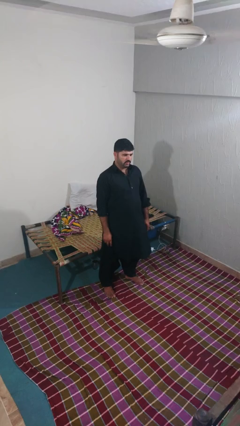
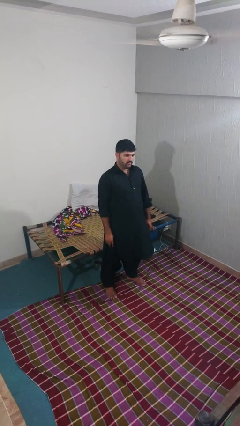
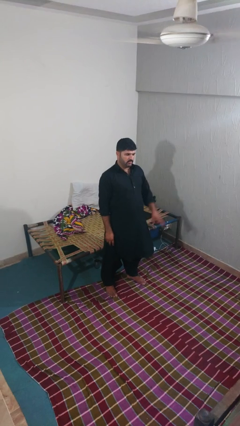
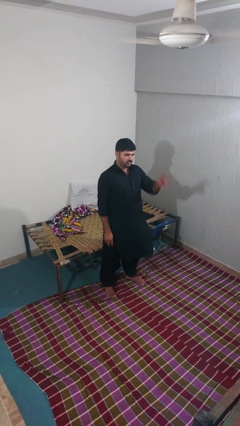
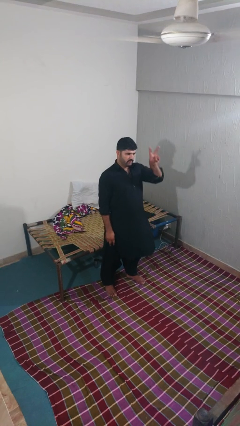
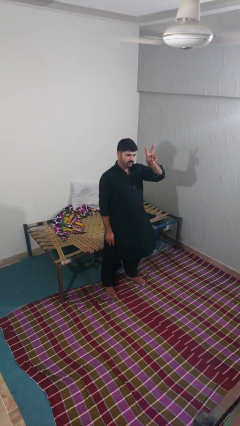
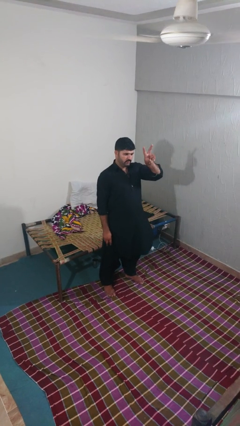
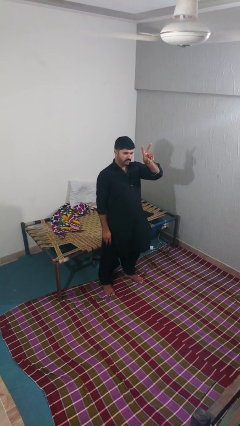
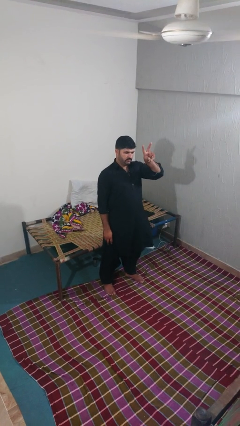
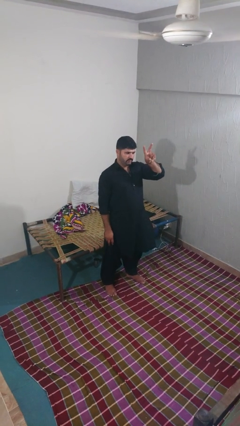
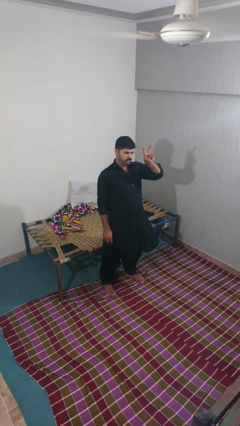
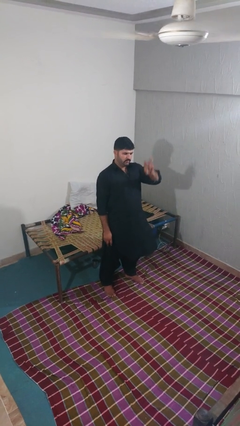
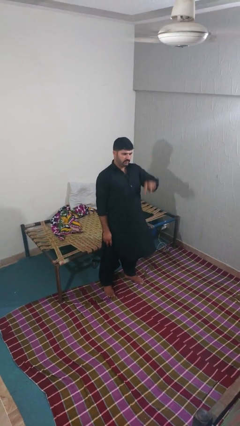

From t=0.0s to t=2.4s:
person gestures peace

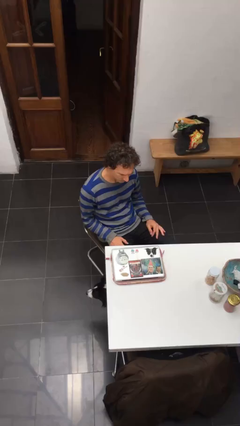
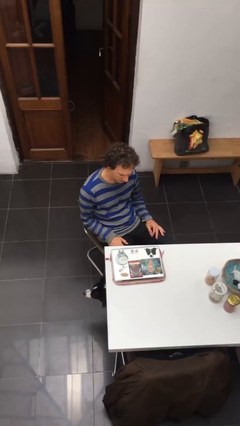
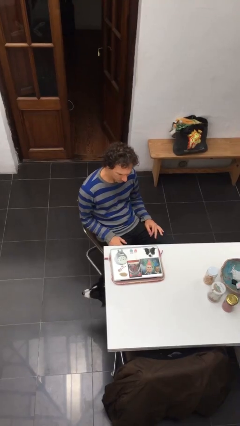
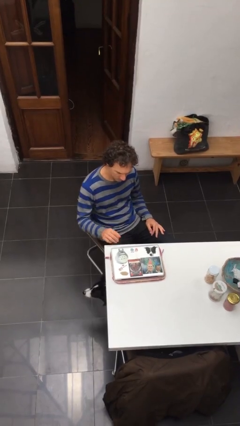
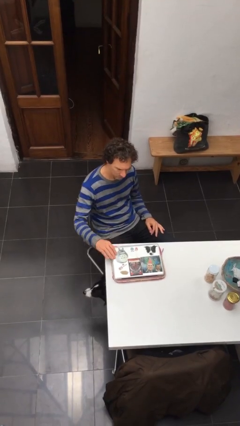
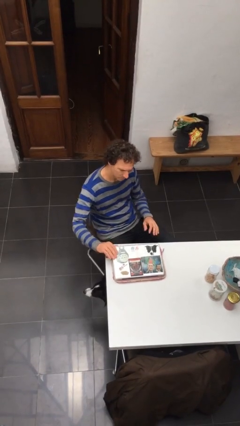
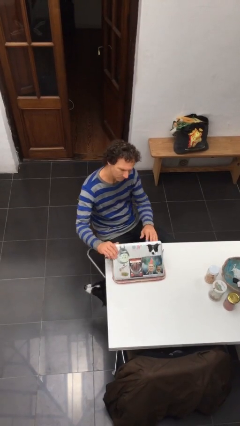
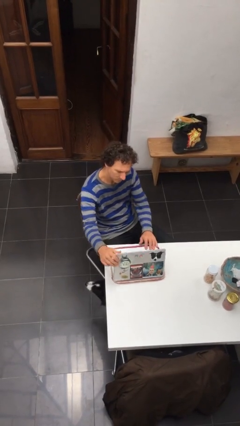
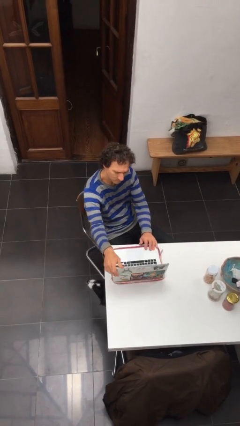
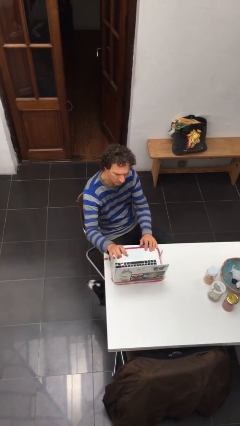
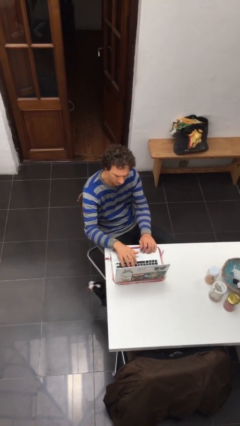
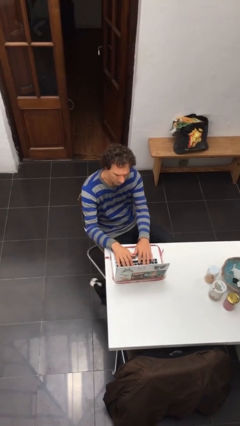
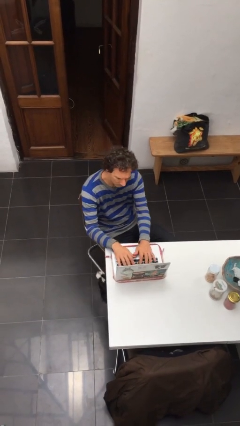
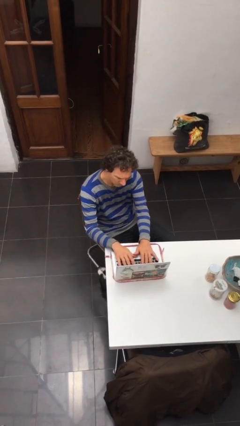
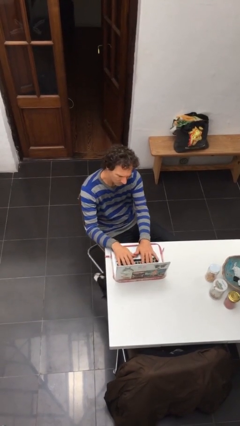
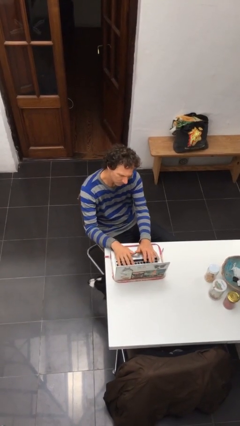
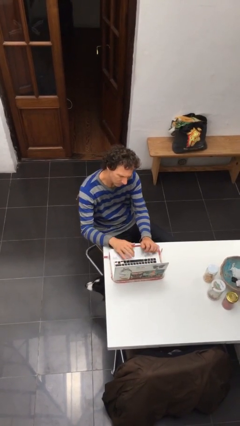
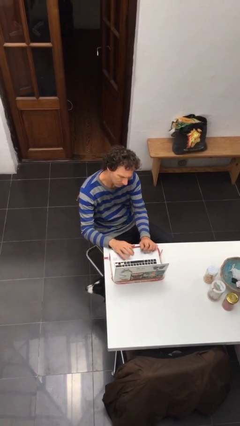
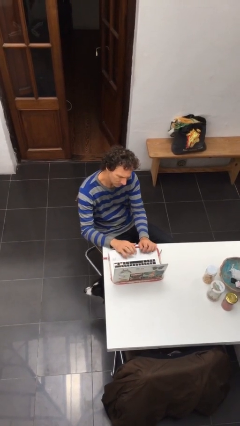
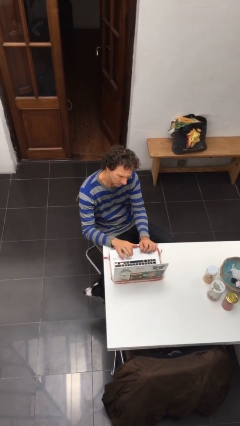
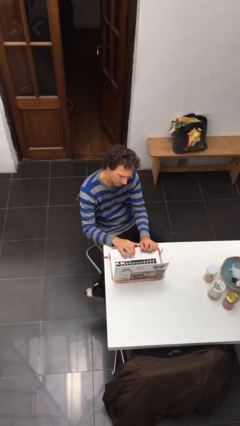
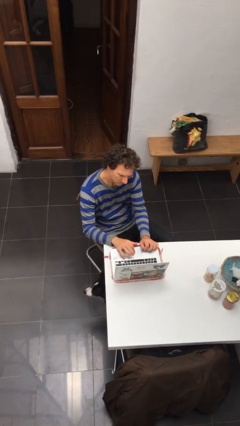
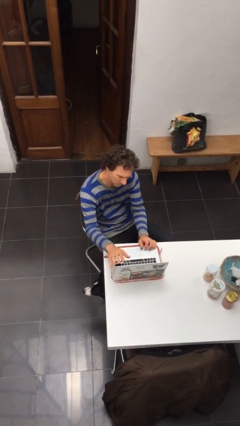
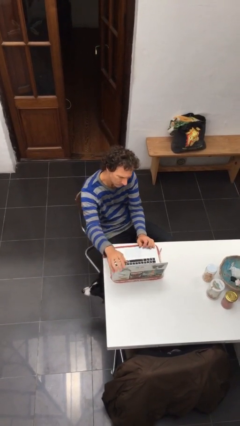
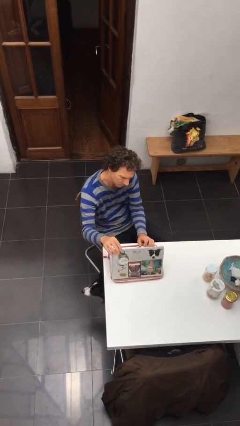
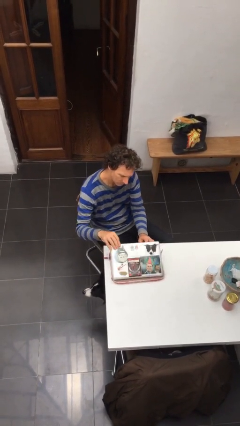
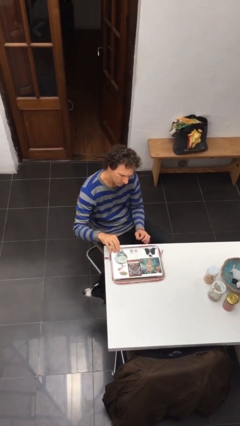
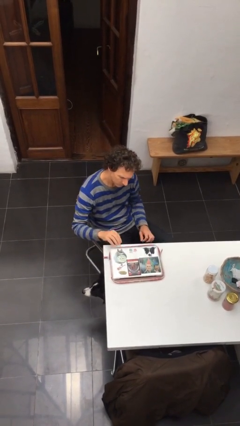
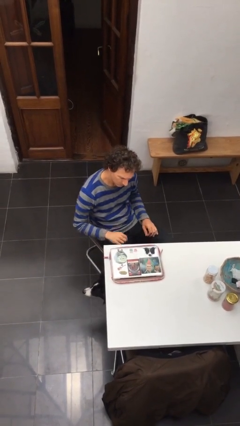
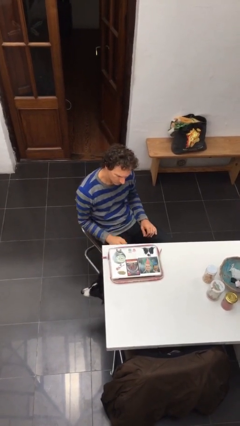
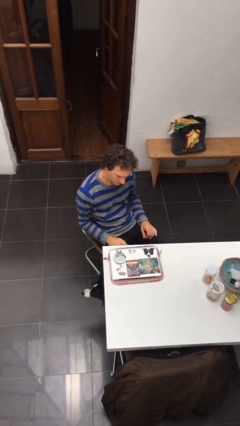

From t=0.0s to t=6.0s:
person interacts with laptop

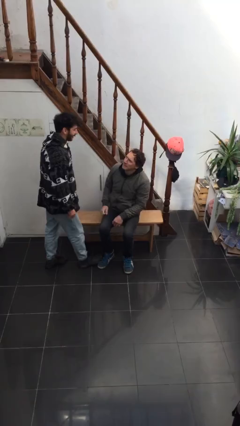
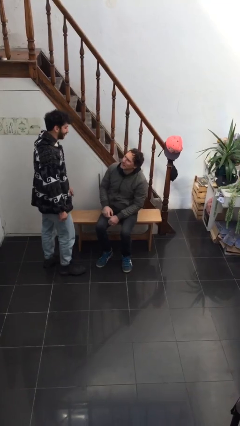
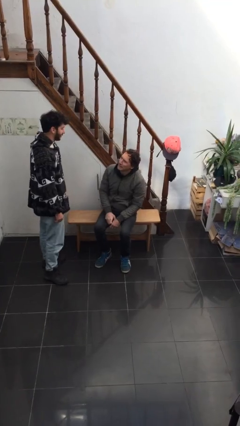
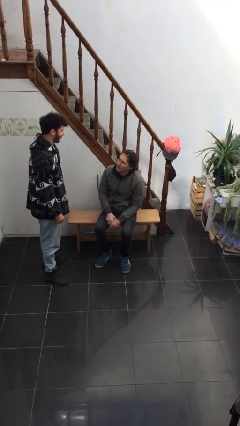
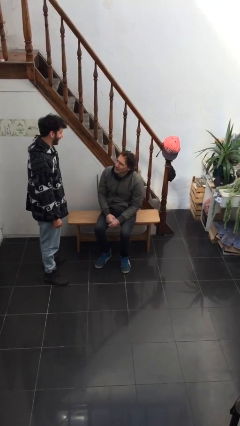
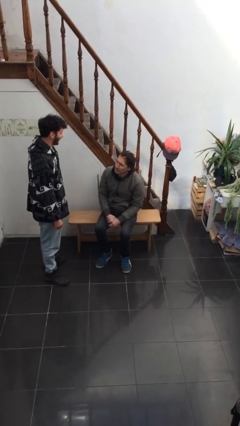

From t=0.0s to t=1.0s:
person embraces person

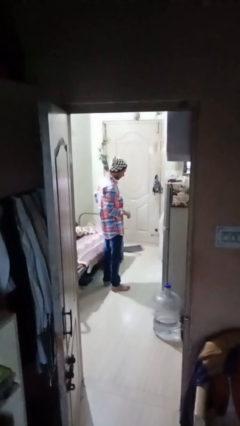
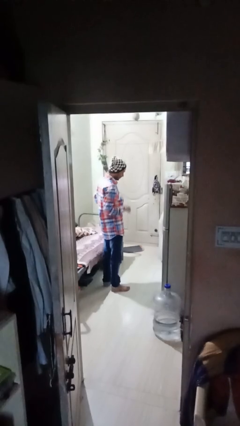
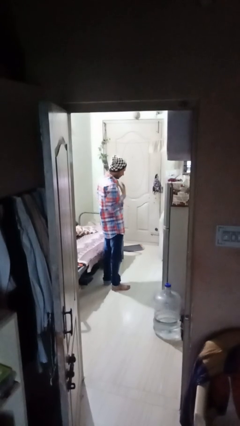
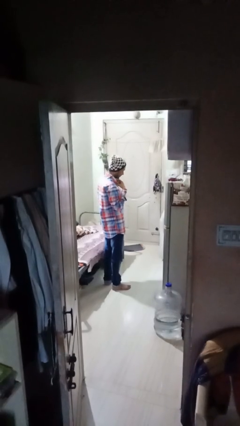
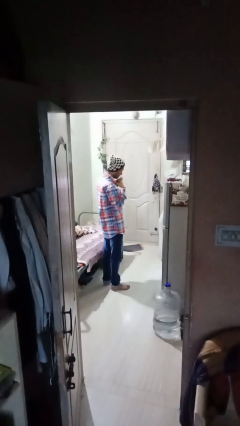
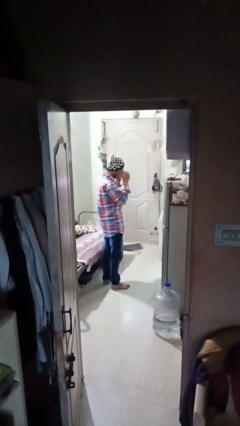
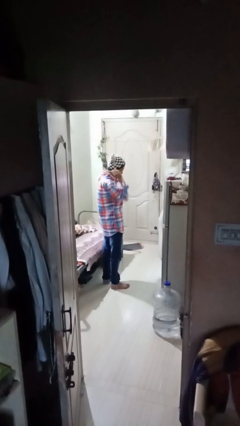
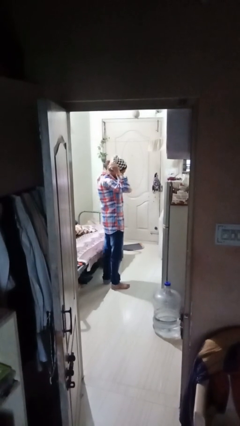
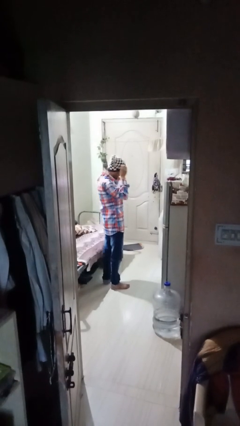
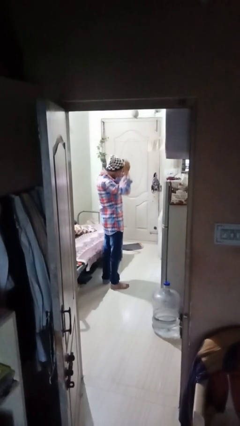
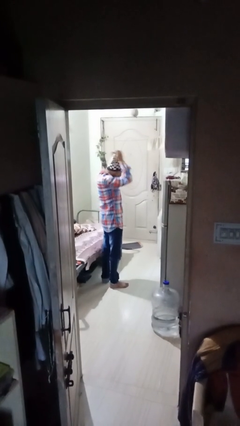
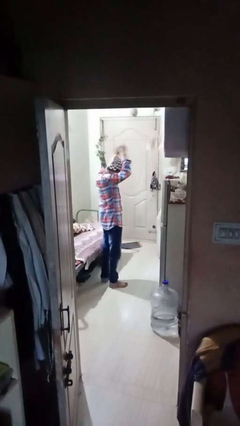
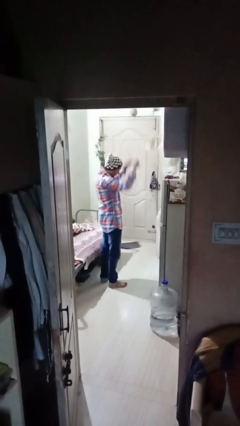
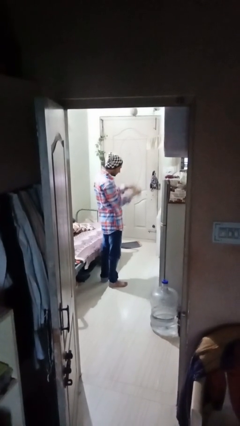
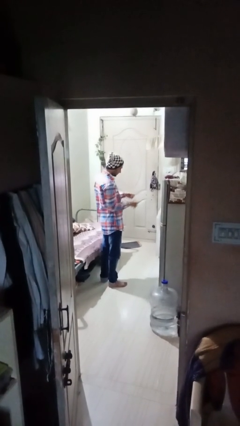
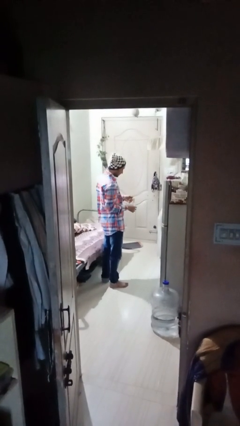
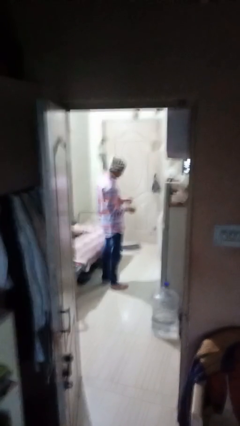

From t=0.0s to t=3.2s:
person takes off necklace

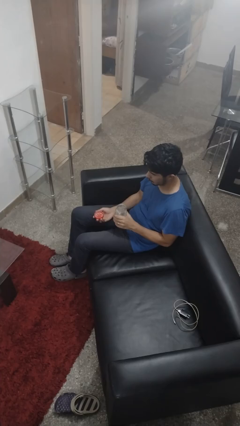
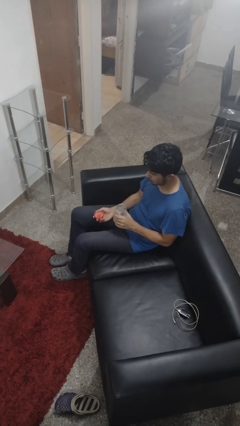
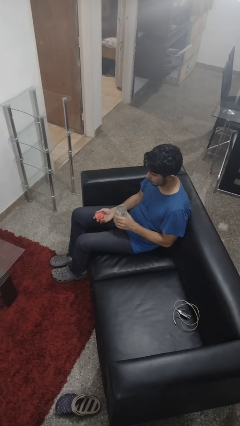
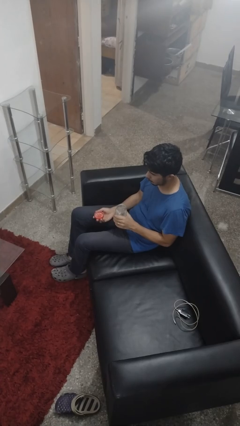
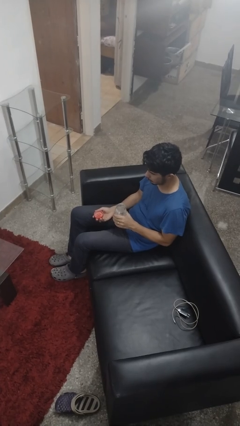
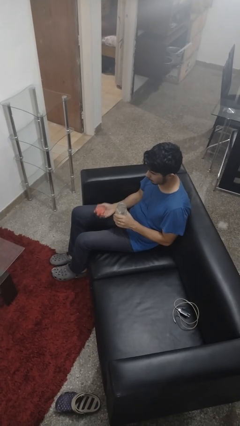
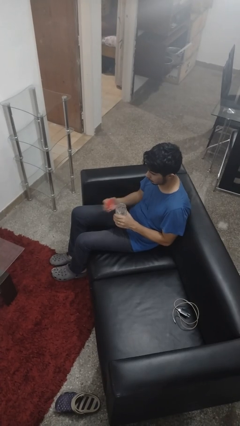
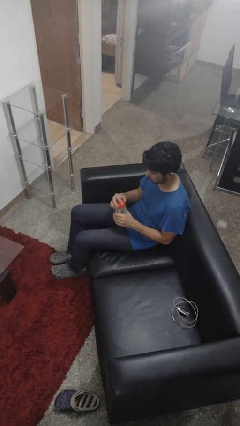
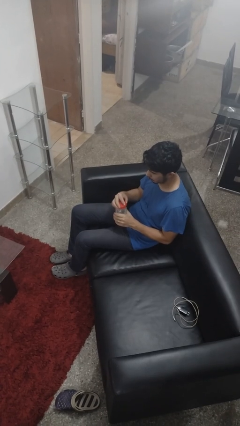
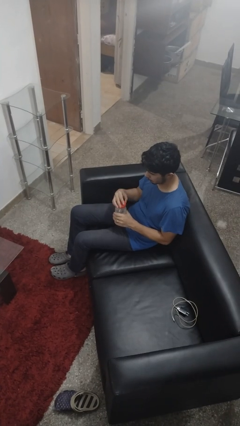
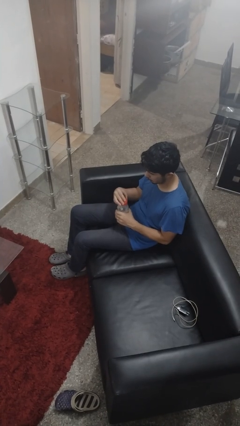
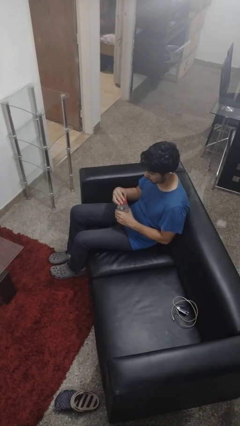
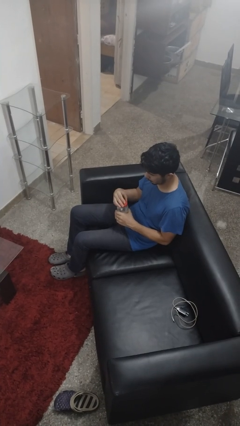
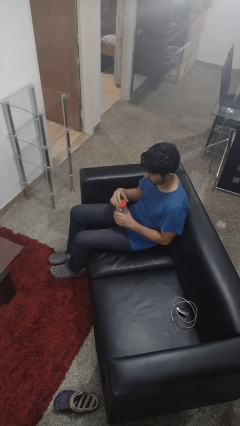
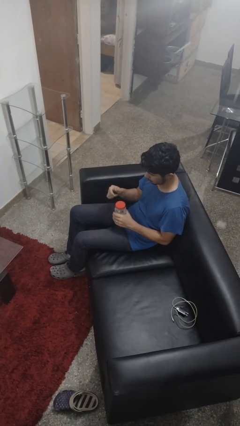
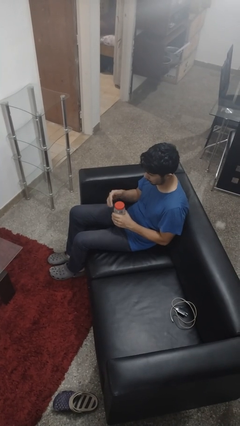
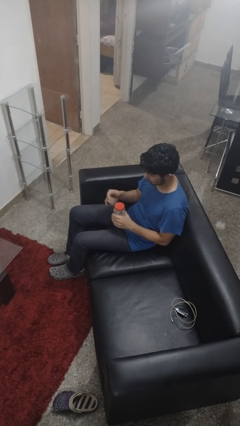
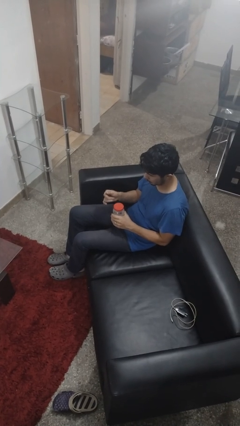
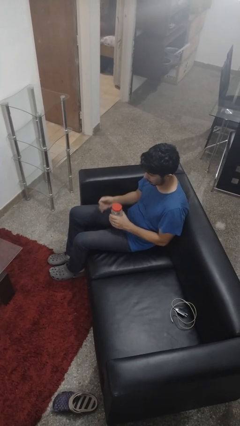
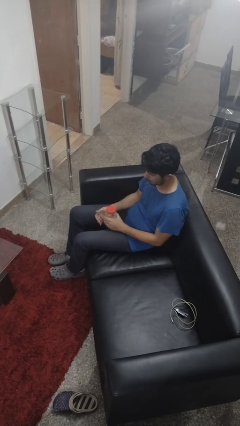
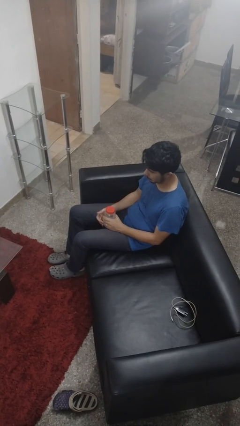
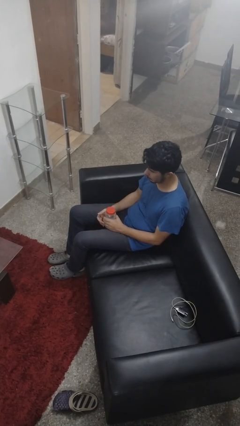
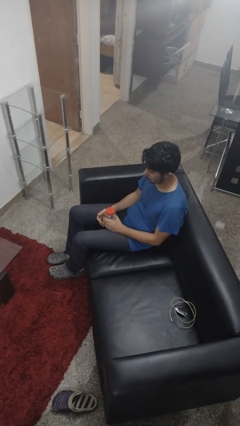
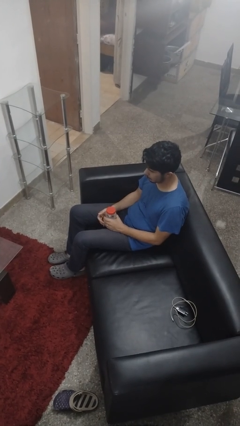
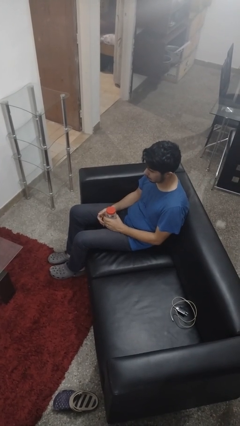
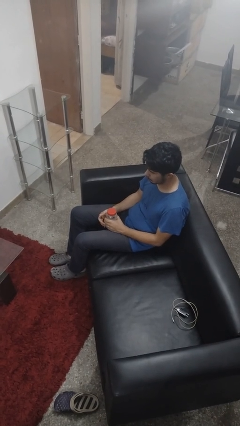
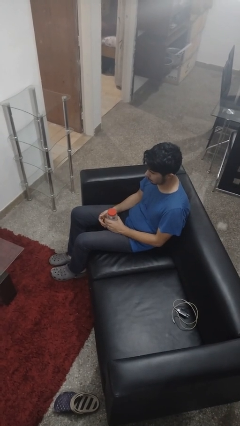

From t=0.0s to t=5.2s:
person closes jar
